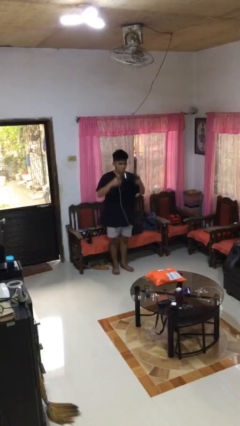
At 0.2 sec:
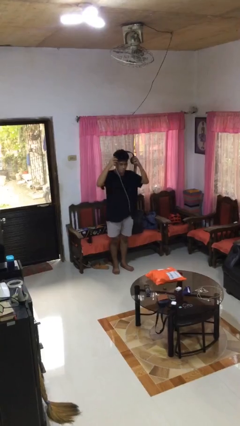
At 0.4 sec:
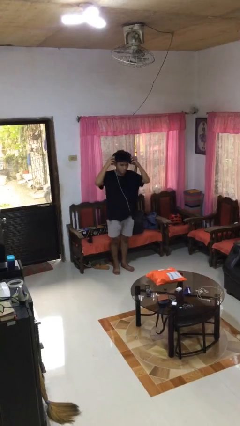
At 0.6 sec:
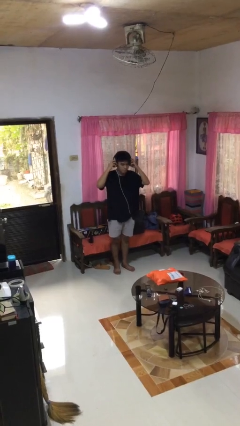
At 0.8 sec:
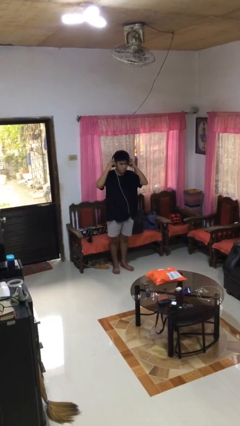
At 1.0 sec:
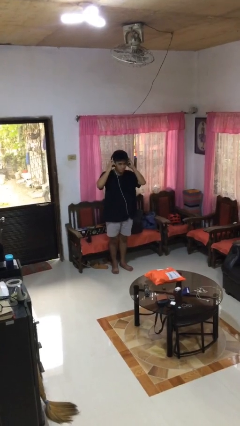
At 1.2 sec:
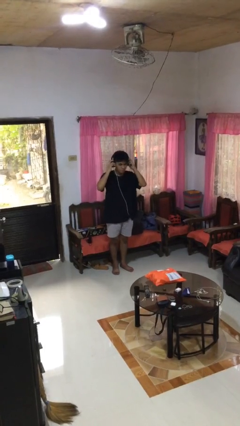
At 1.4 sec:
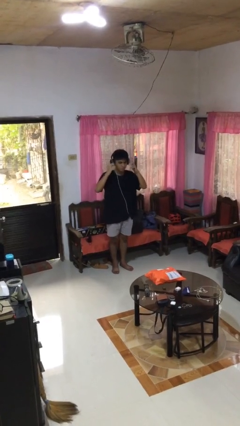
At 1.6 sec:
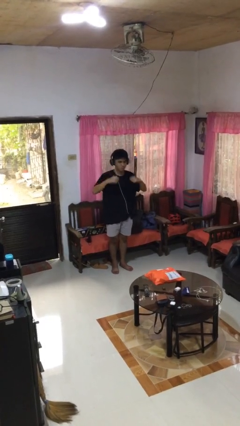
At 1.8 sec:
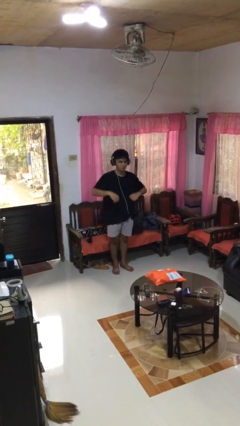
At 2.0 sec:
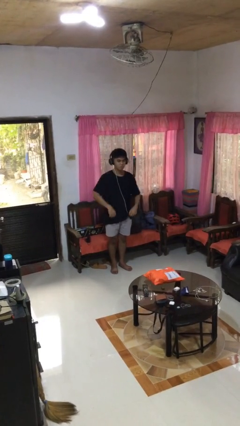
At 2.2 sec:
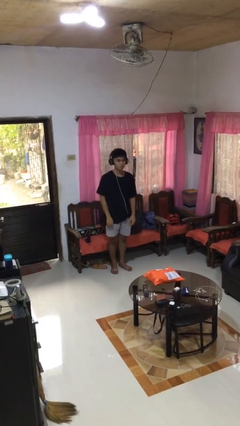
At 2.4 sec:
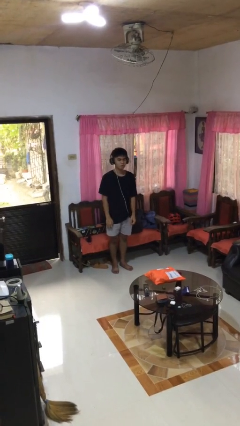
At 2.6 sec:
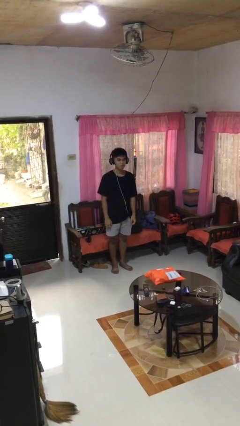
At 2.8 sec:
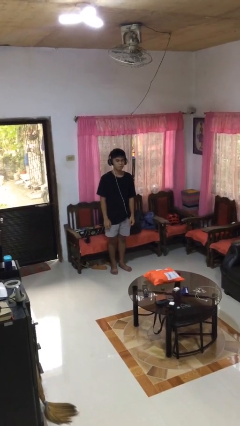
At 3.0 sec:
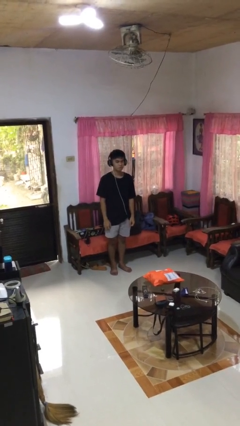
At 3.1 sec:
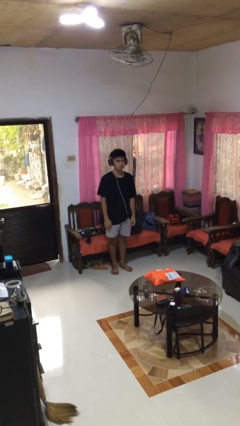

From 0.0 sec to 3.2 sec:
person puts on headphones

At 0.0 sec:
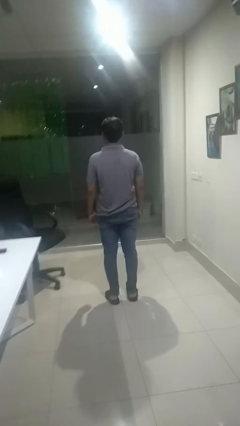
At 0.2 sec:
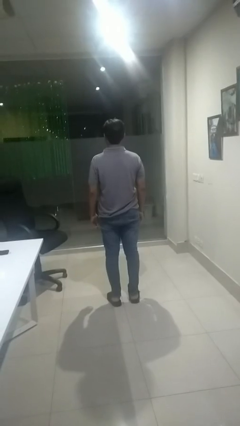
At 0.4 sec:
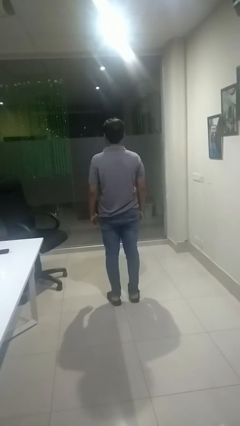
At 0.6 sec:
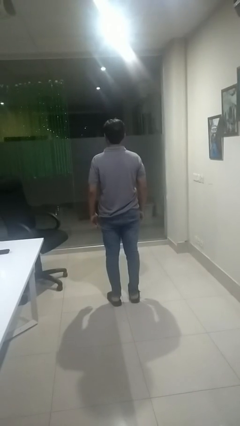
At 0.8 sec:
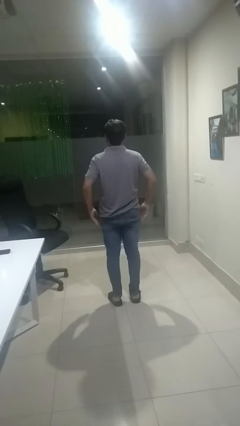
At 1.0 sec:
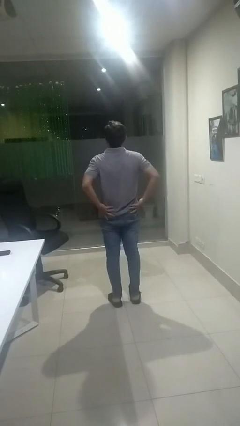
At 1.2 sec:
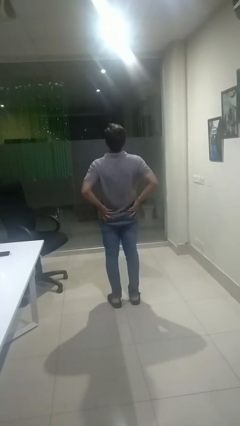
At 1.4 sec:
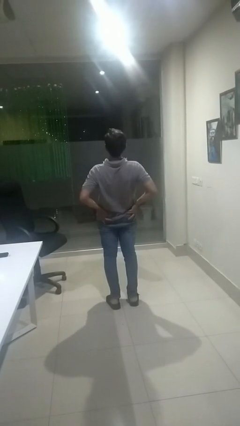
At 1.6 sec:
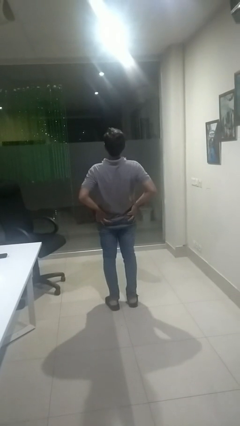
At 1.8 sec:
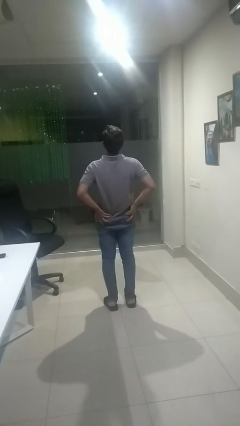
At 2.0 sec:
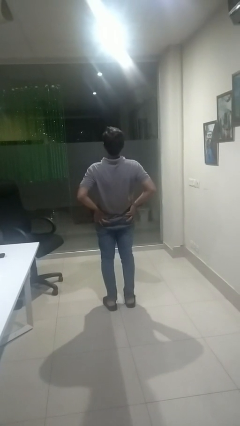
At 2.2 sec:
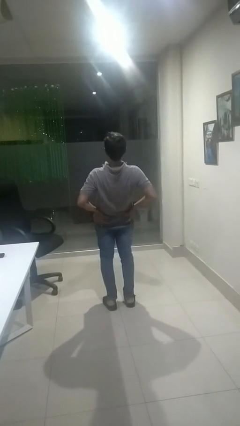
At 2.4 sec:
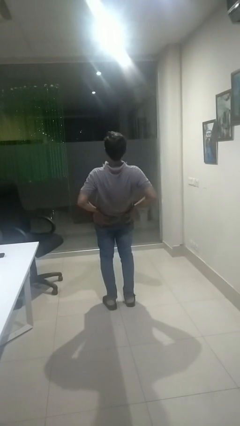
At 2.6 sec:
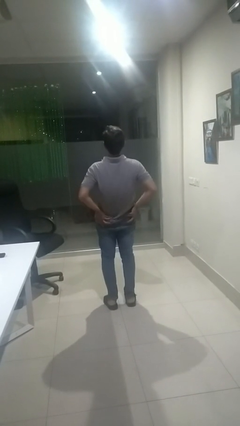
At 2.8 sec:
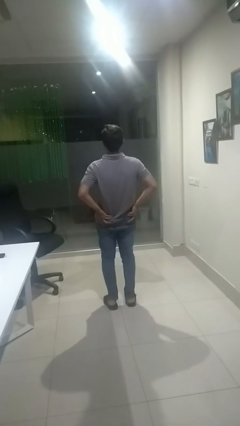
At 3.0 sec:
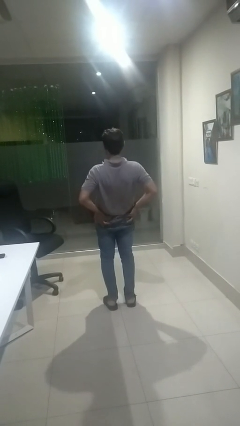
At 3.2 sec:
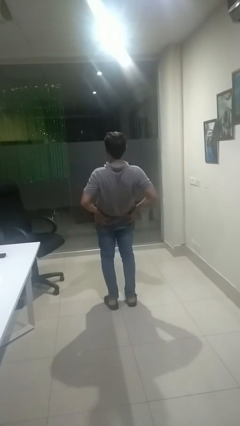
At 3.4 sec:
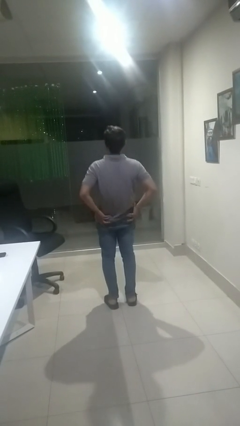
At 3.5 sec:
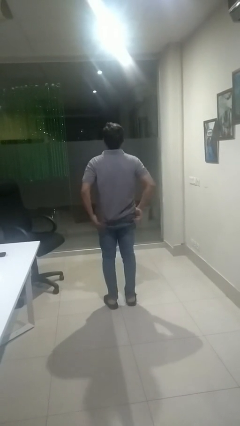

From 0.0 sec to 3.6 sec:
person stretches back

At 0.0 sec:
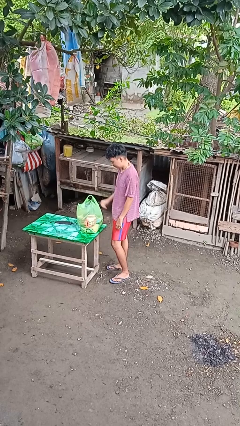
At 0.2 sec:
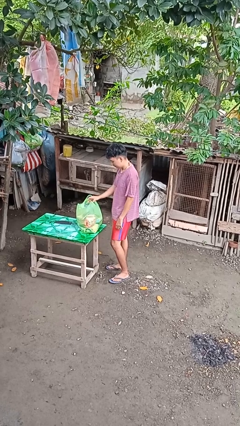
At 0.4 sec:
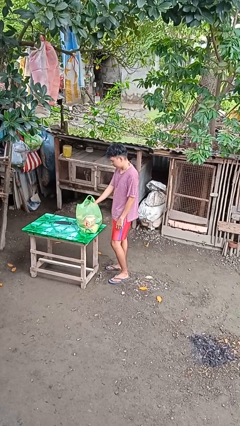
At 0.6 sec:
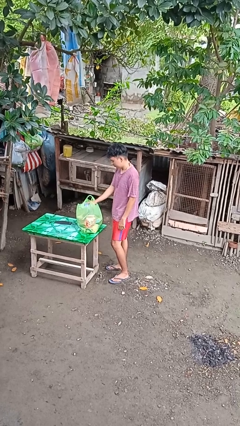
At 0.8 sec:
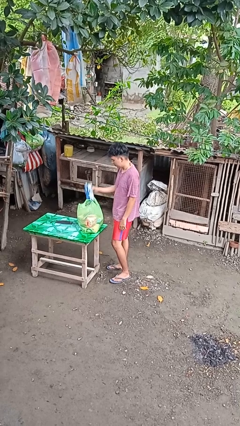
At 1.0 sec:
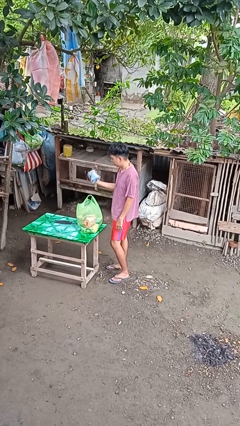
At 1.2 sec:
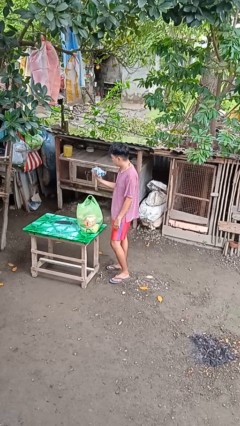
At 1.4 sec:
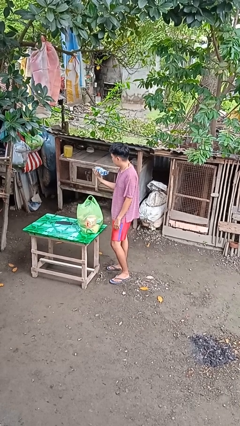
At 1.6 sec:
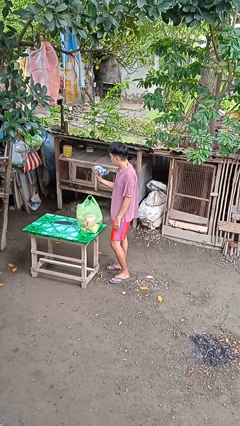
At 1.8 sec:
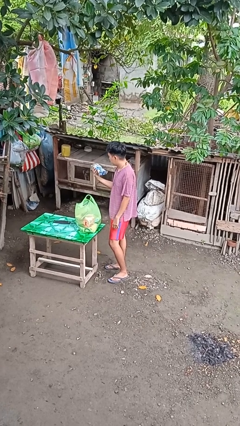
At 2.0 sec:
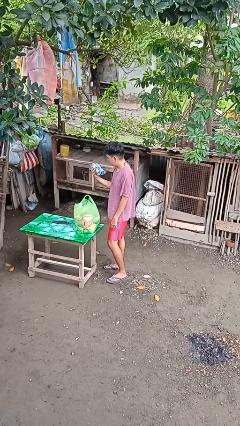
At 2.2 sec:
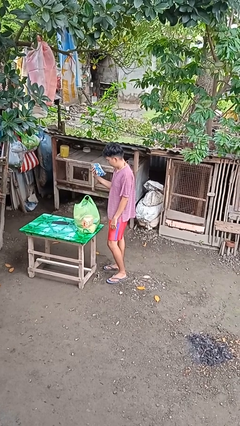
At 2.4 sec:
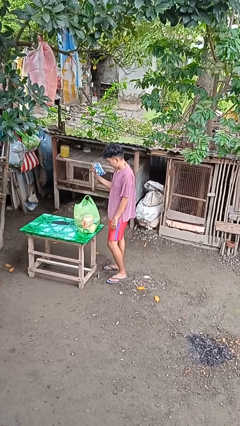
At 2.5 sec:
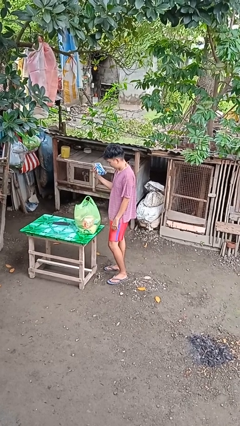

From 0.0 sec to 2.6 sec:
person takes object from bag

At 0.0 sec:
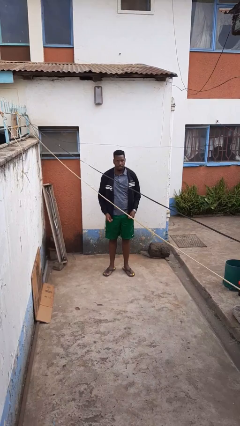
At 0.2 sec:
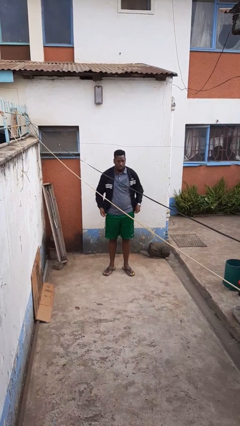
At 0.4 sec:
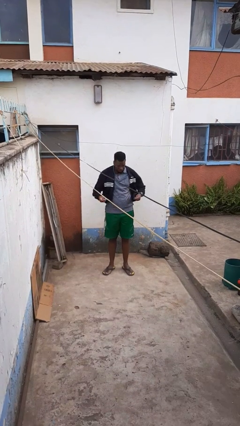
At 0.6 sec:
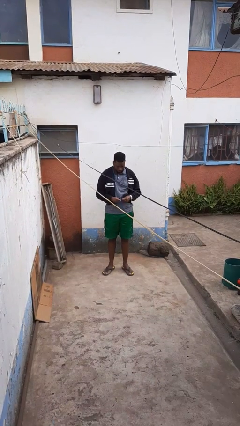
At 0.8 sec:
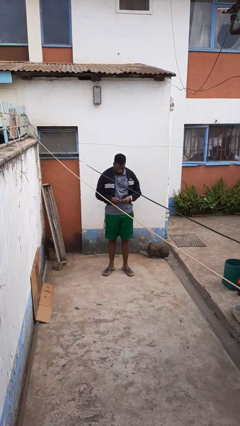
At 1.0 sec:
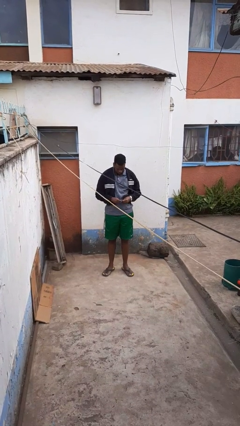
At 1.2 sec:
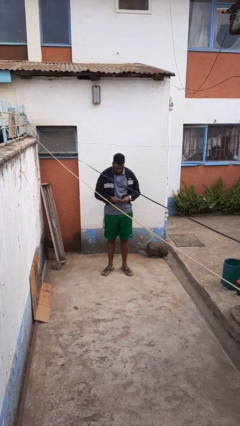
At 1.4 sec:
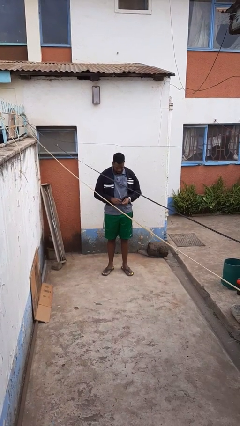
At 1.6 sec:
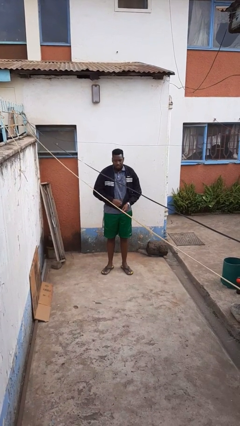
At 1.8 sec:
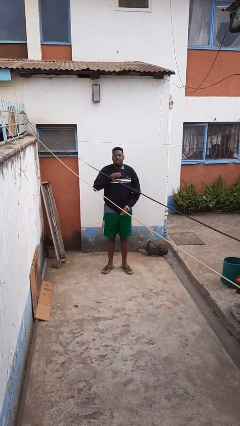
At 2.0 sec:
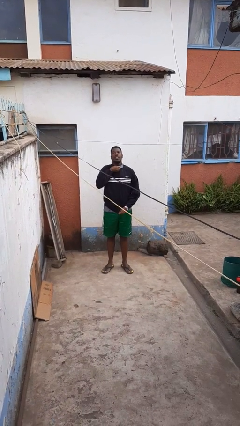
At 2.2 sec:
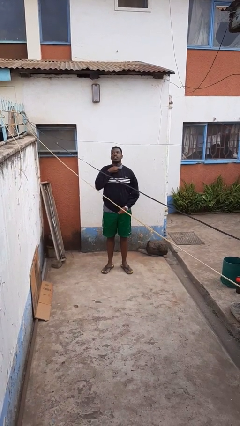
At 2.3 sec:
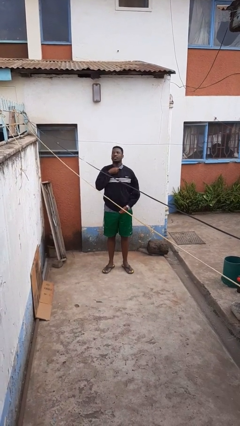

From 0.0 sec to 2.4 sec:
person zips up jacket

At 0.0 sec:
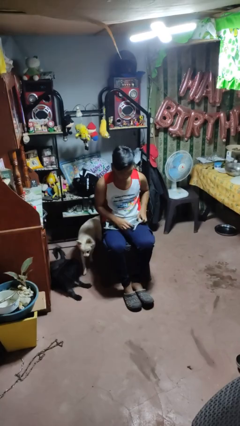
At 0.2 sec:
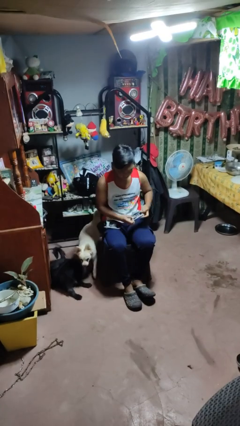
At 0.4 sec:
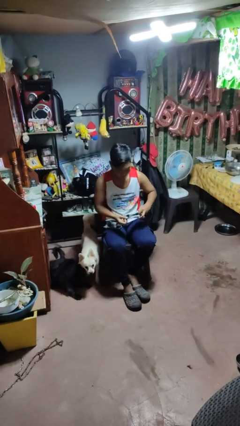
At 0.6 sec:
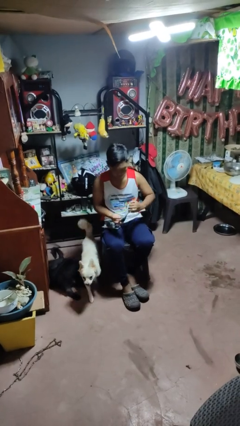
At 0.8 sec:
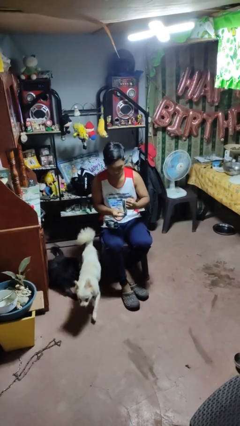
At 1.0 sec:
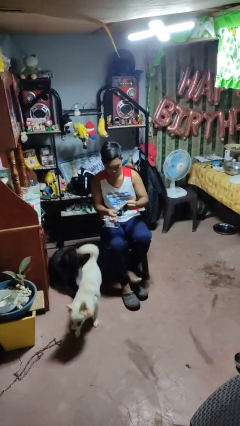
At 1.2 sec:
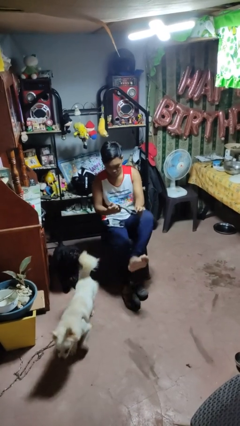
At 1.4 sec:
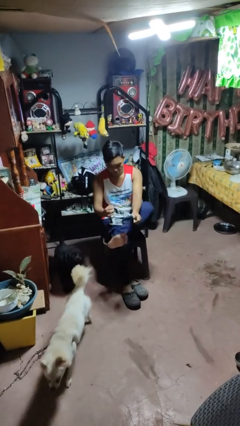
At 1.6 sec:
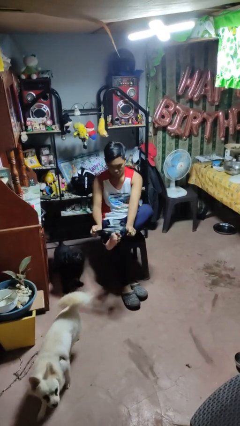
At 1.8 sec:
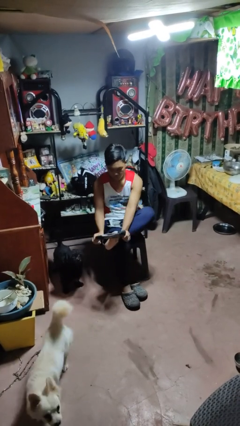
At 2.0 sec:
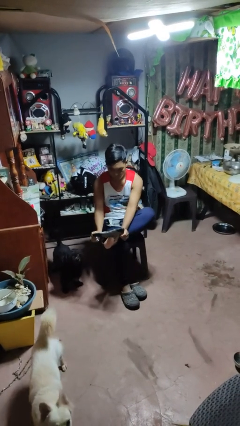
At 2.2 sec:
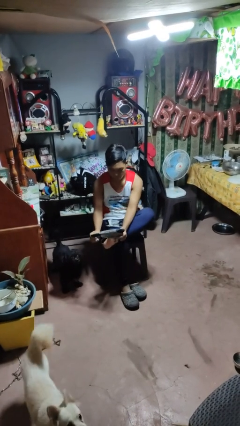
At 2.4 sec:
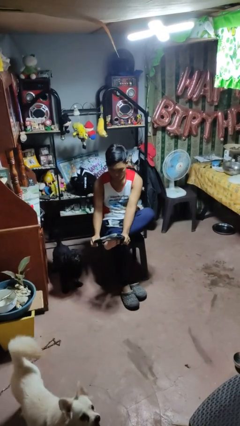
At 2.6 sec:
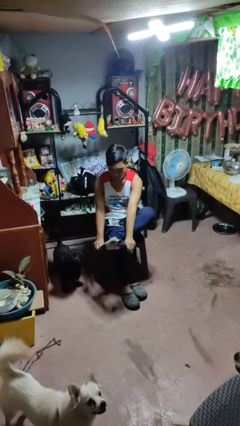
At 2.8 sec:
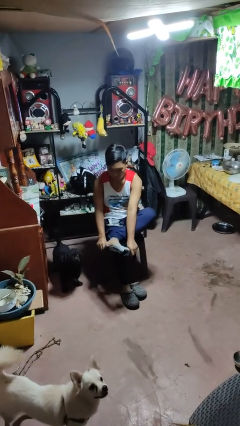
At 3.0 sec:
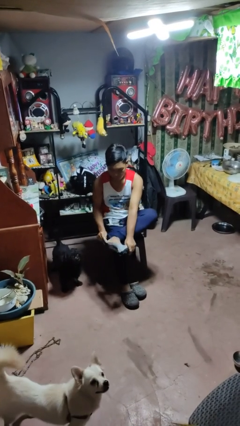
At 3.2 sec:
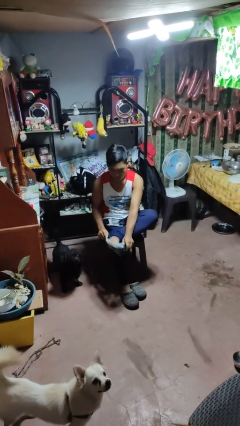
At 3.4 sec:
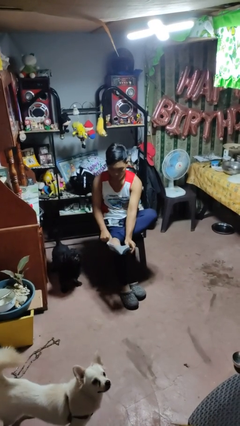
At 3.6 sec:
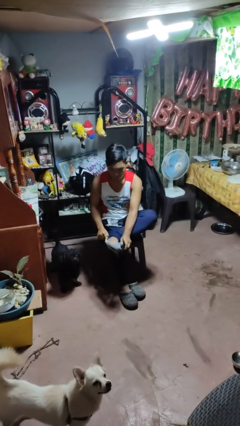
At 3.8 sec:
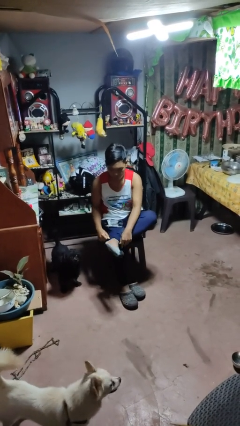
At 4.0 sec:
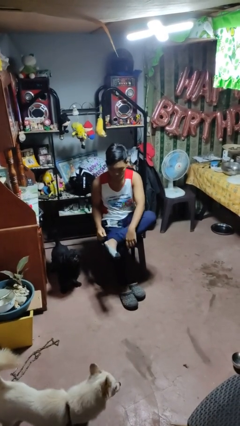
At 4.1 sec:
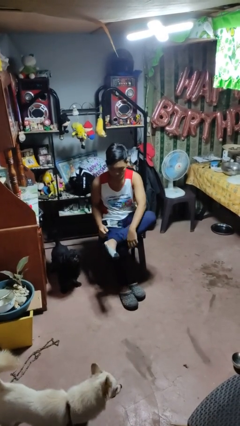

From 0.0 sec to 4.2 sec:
person puts on socks

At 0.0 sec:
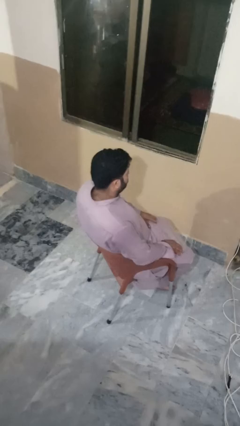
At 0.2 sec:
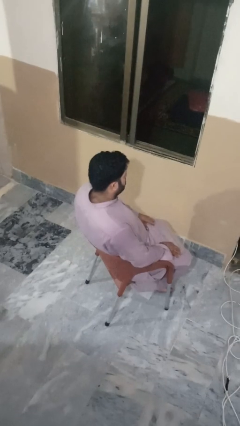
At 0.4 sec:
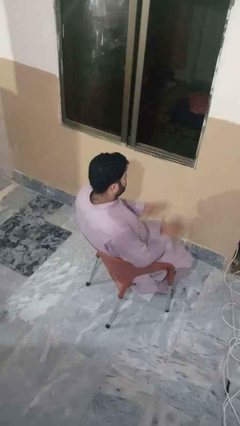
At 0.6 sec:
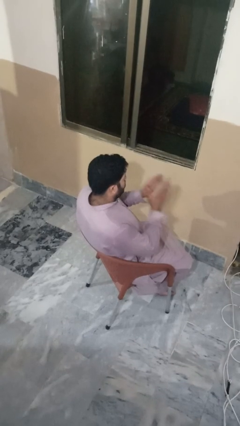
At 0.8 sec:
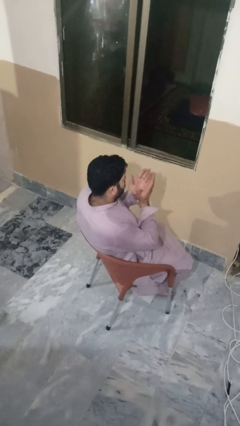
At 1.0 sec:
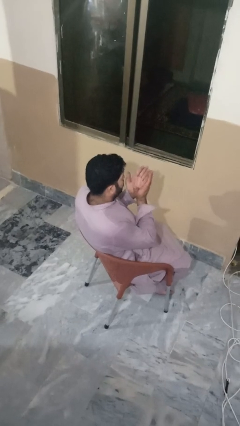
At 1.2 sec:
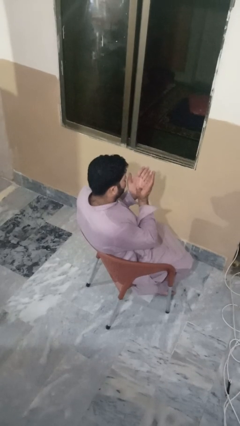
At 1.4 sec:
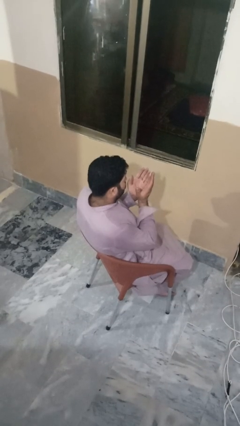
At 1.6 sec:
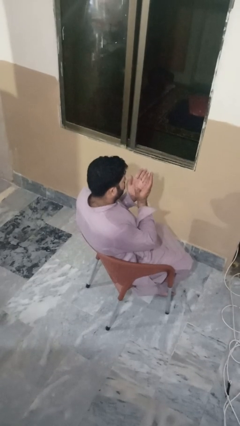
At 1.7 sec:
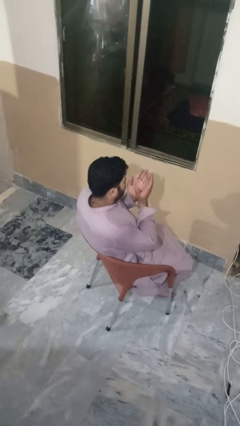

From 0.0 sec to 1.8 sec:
person prays
